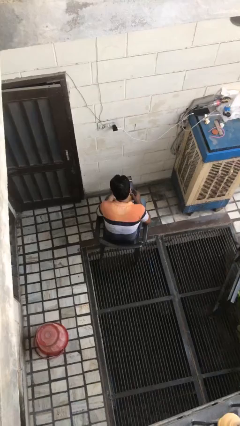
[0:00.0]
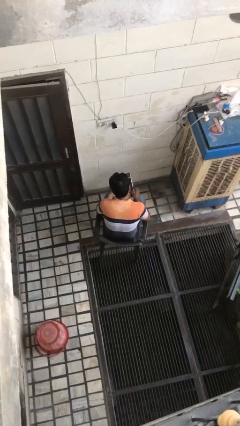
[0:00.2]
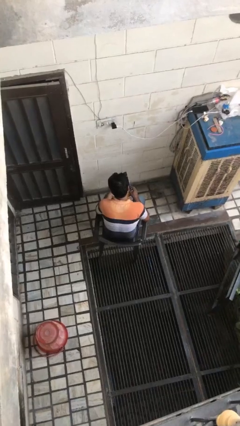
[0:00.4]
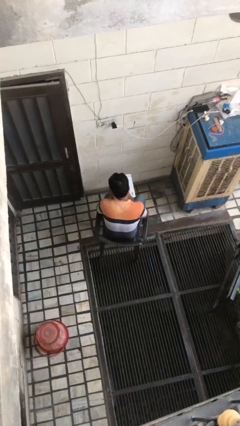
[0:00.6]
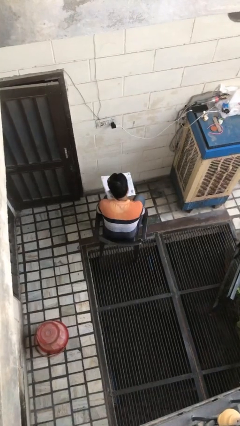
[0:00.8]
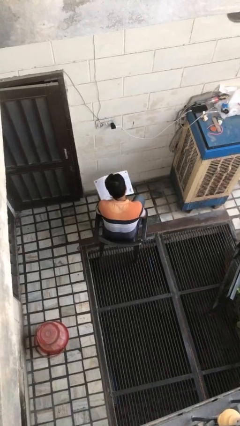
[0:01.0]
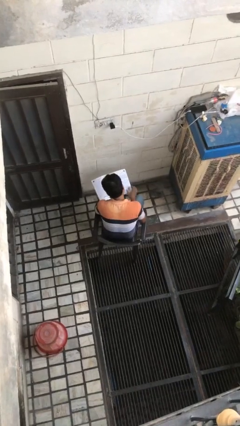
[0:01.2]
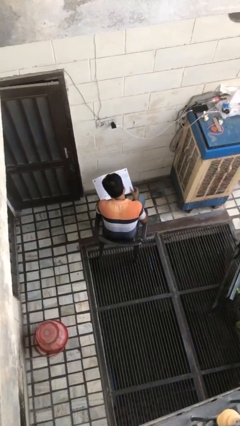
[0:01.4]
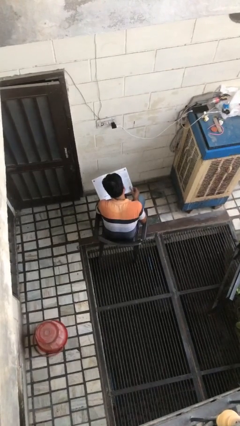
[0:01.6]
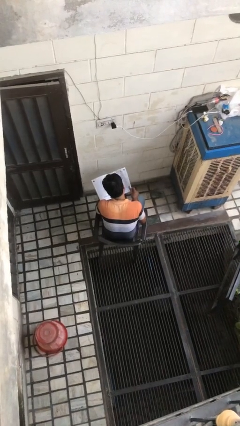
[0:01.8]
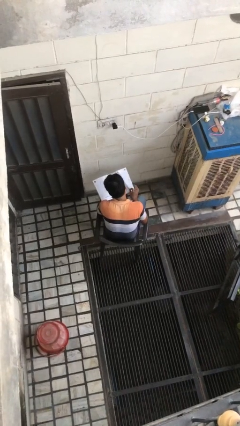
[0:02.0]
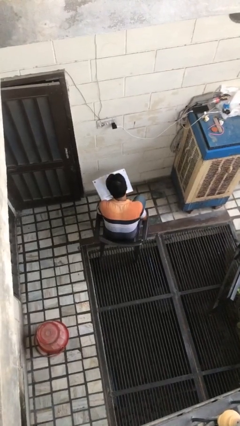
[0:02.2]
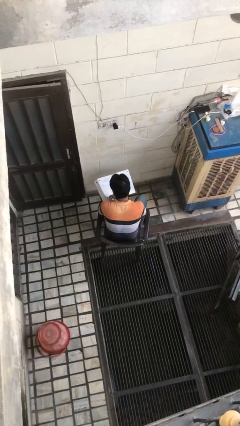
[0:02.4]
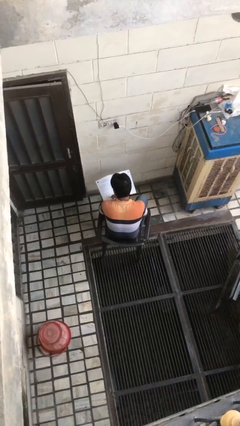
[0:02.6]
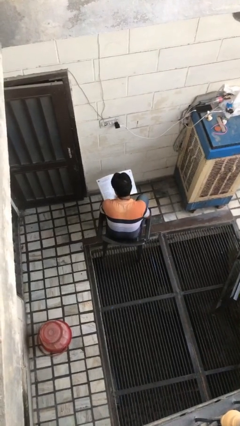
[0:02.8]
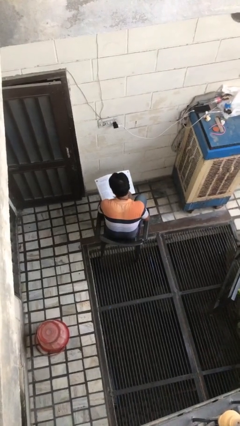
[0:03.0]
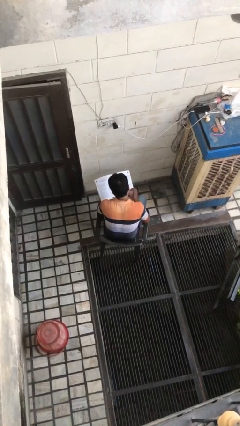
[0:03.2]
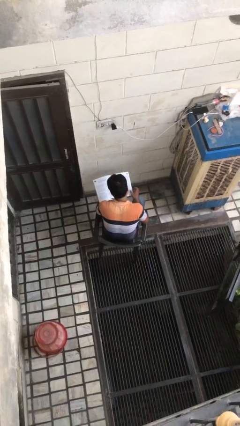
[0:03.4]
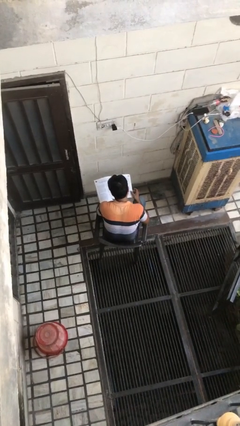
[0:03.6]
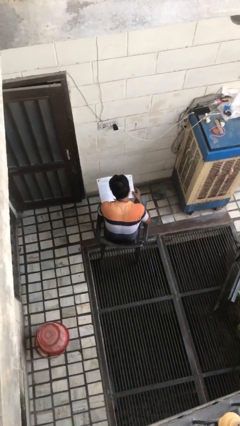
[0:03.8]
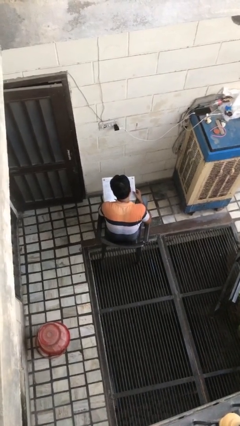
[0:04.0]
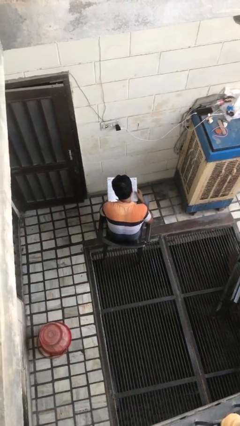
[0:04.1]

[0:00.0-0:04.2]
person reads magazine

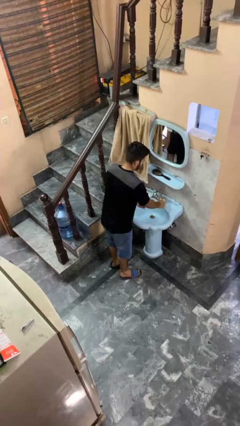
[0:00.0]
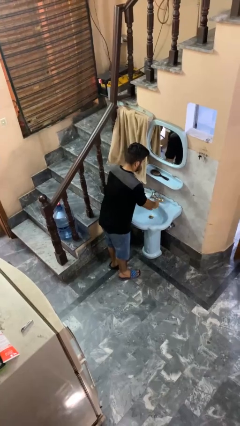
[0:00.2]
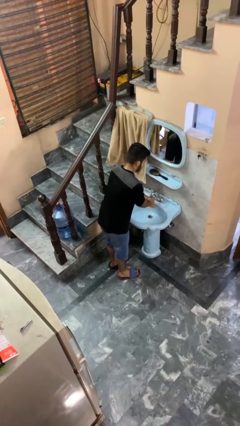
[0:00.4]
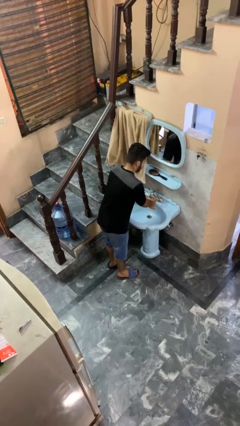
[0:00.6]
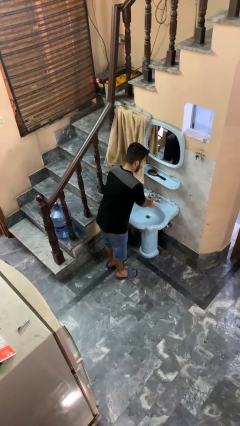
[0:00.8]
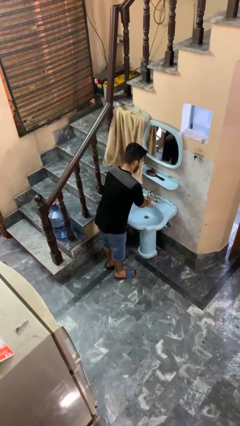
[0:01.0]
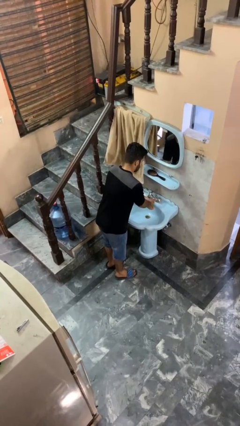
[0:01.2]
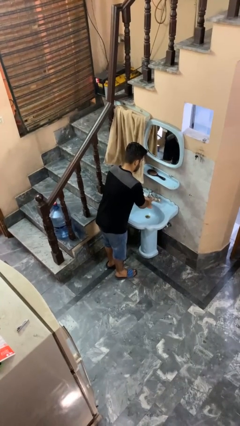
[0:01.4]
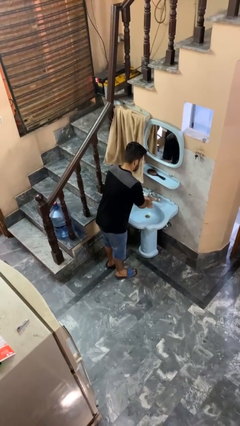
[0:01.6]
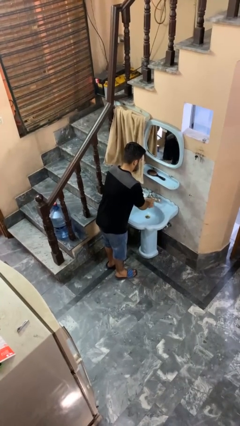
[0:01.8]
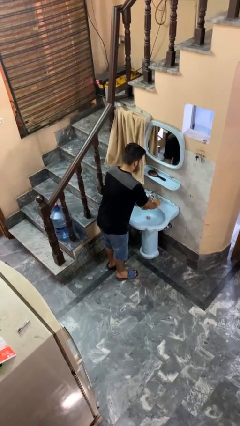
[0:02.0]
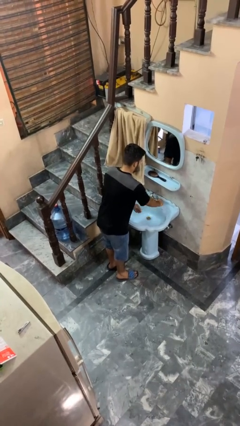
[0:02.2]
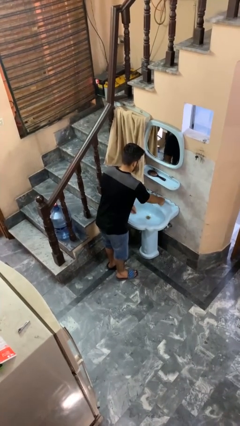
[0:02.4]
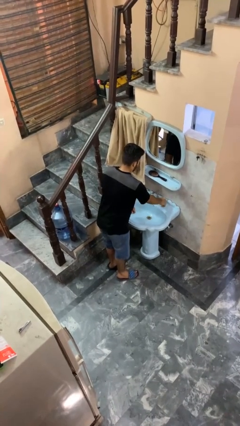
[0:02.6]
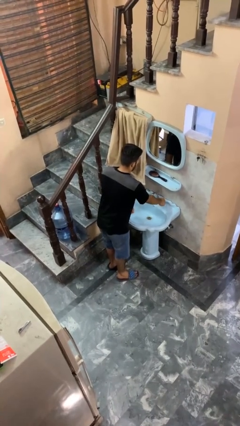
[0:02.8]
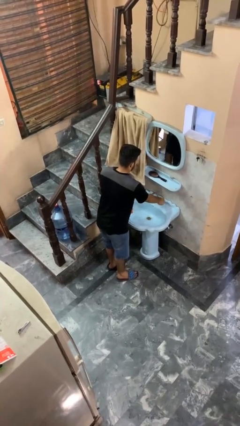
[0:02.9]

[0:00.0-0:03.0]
person washes hands

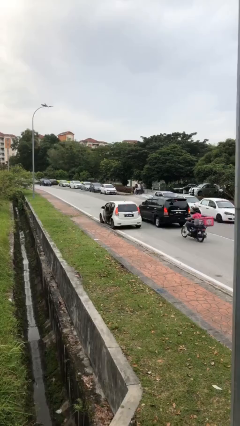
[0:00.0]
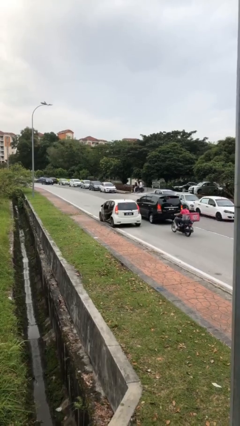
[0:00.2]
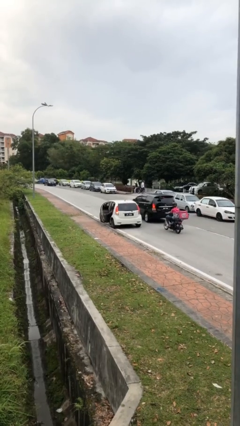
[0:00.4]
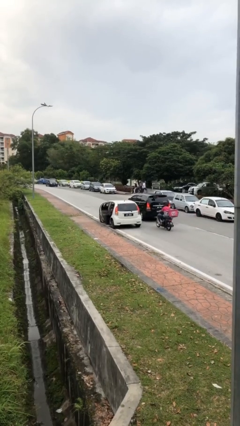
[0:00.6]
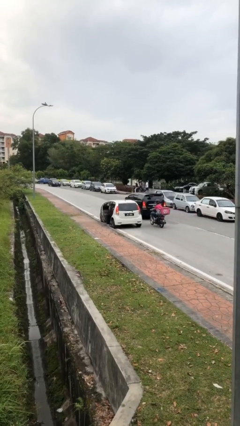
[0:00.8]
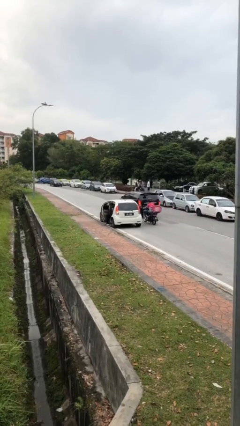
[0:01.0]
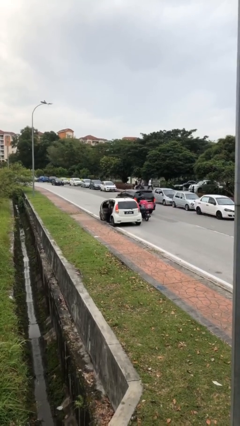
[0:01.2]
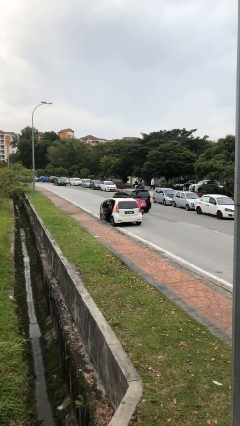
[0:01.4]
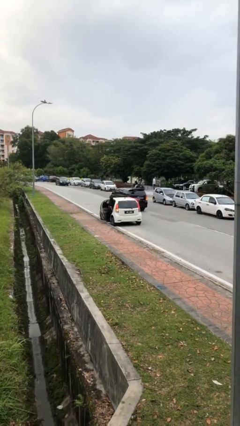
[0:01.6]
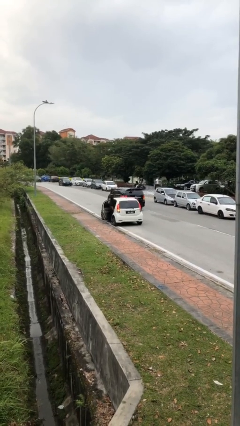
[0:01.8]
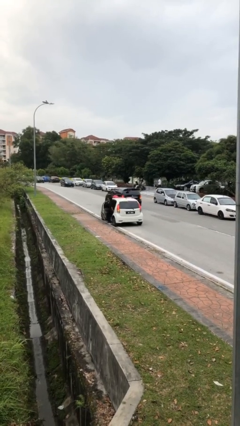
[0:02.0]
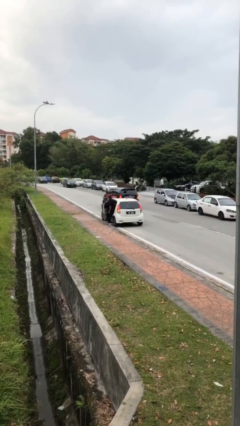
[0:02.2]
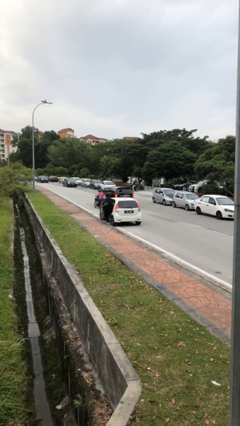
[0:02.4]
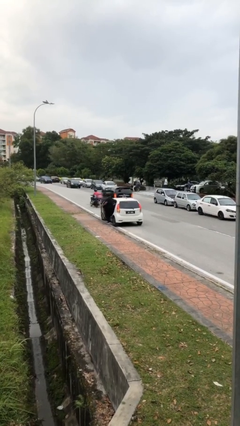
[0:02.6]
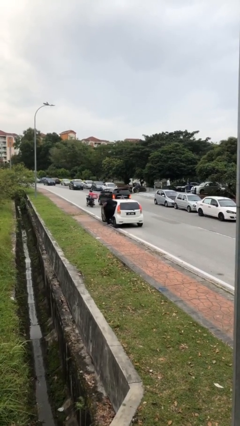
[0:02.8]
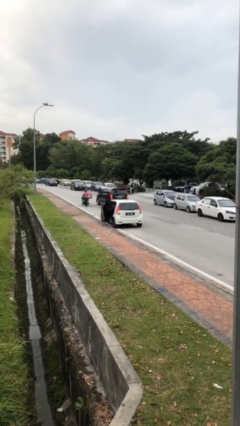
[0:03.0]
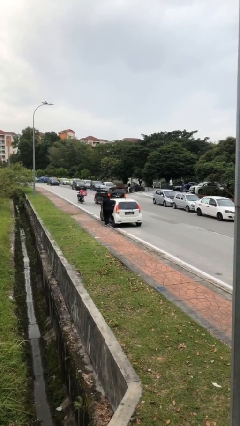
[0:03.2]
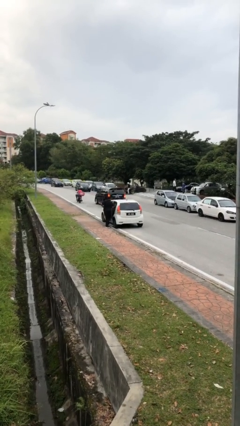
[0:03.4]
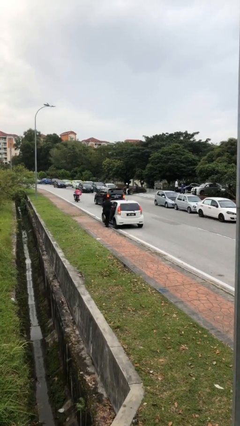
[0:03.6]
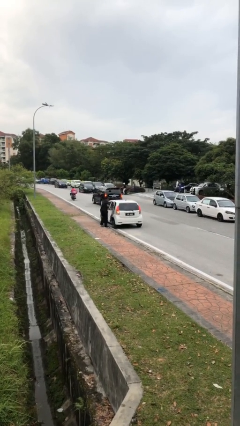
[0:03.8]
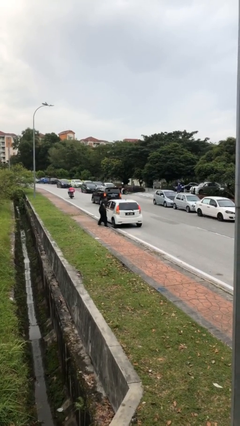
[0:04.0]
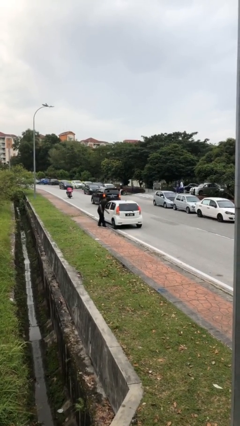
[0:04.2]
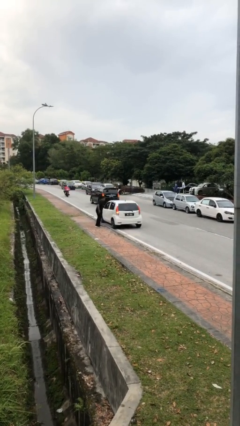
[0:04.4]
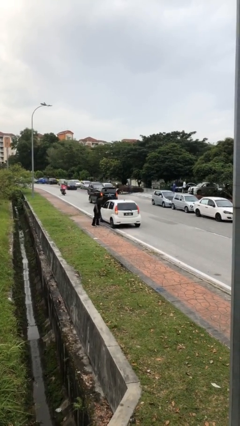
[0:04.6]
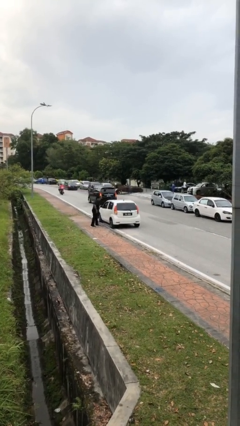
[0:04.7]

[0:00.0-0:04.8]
car drops off person

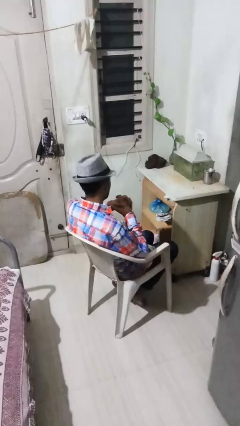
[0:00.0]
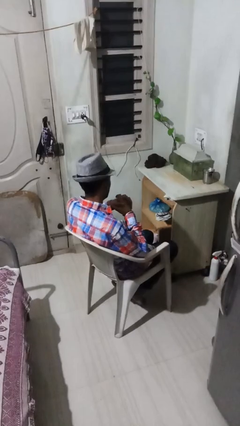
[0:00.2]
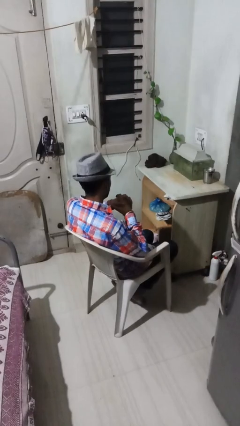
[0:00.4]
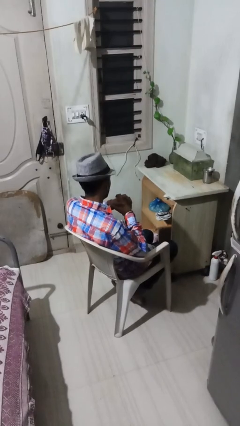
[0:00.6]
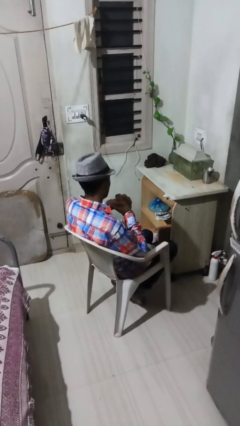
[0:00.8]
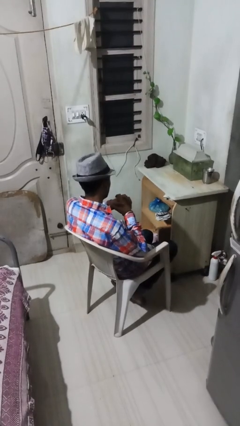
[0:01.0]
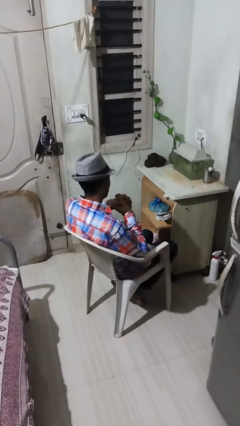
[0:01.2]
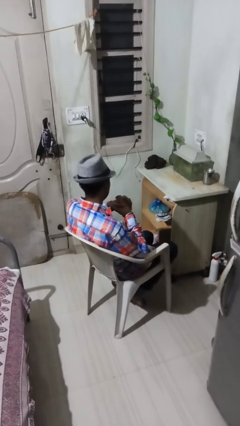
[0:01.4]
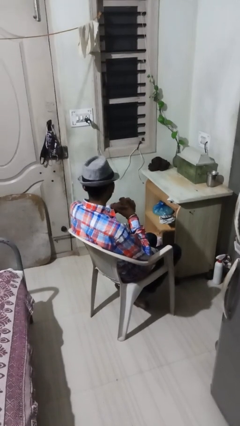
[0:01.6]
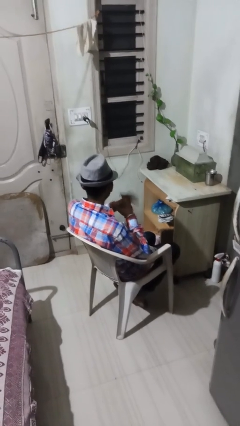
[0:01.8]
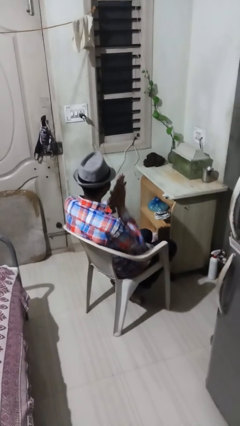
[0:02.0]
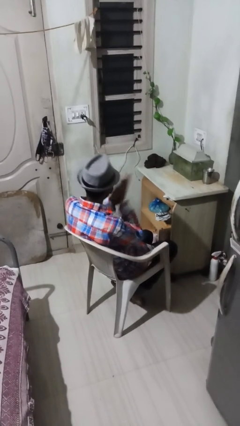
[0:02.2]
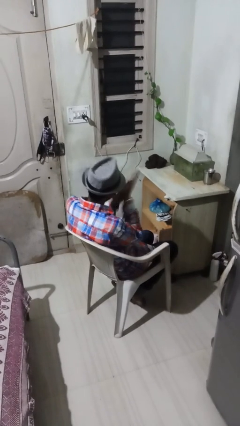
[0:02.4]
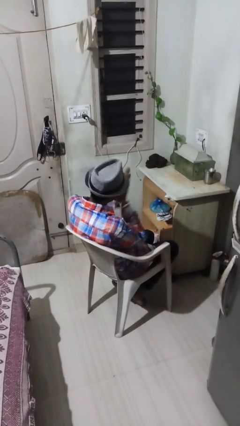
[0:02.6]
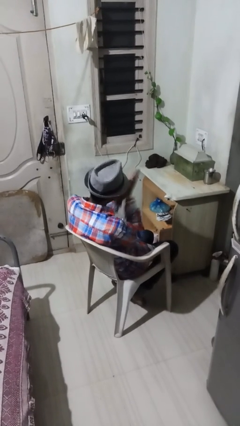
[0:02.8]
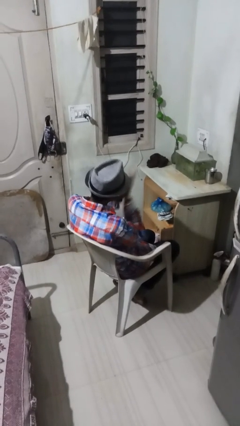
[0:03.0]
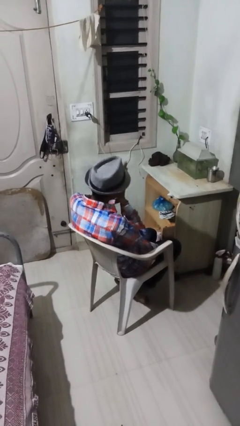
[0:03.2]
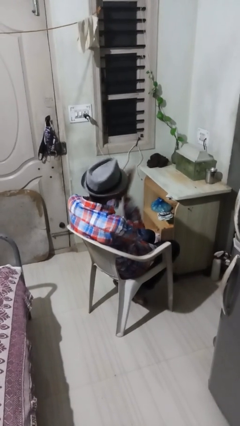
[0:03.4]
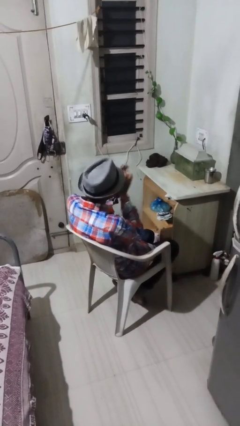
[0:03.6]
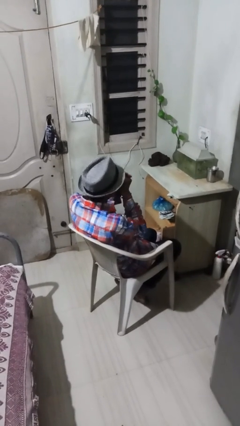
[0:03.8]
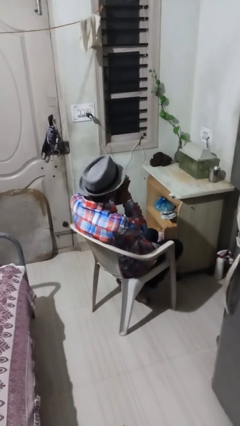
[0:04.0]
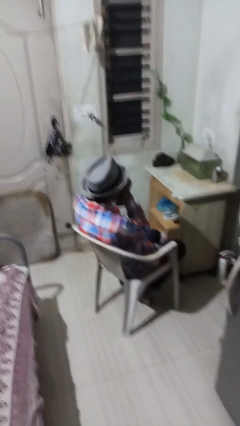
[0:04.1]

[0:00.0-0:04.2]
person blows into hands

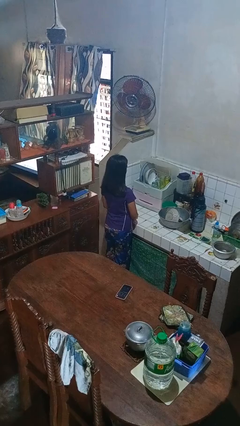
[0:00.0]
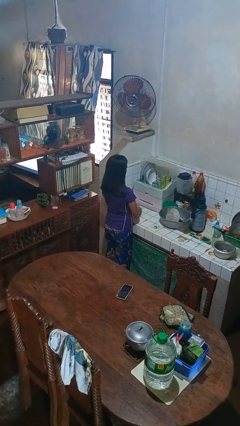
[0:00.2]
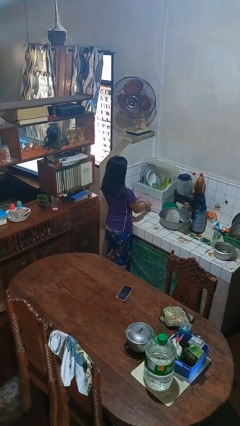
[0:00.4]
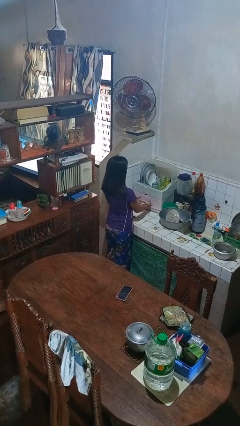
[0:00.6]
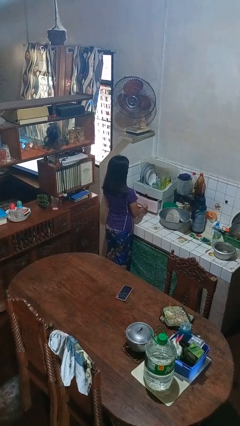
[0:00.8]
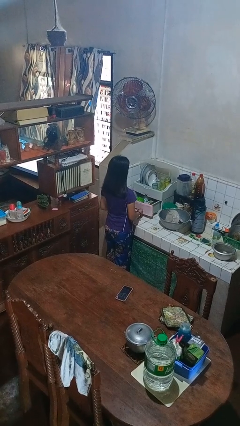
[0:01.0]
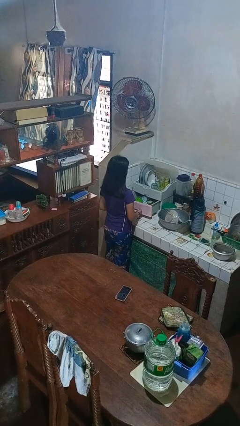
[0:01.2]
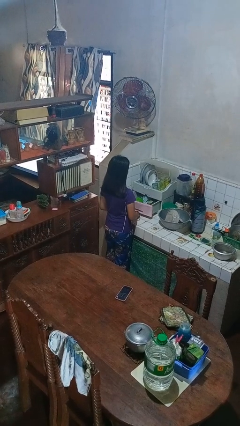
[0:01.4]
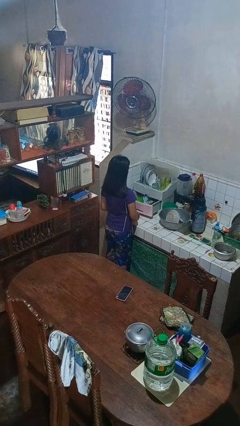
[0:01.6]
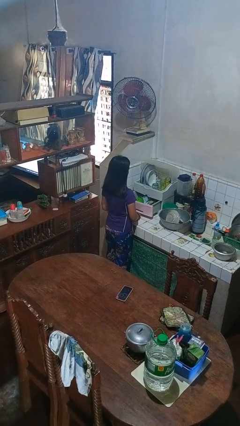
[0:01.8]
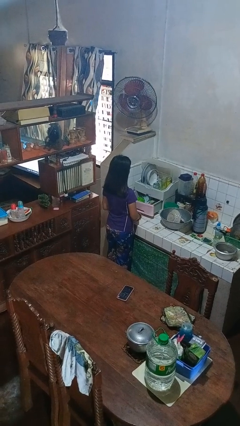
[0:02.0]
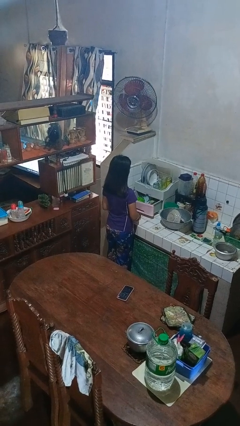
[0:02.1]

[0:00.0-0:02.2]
person opens kitchen drawer
